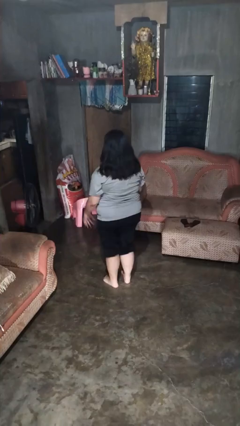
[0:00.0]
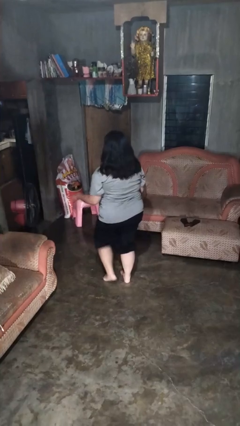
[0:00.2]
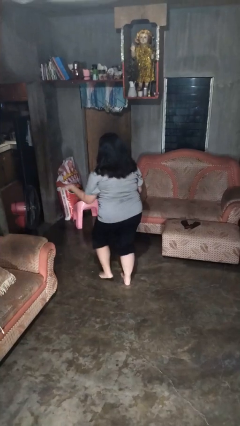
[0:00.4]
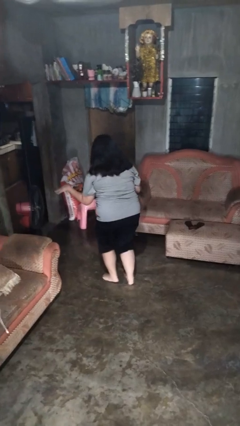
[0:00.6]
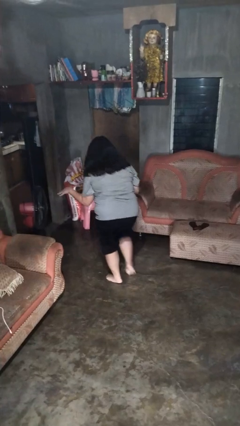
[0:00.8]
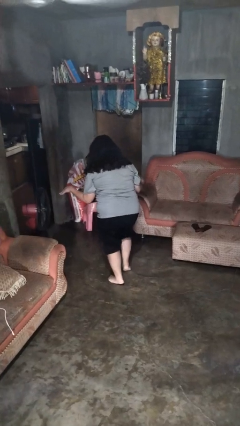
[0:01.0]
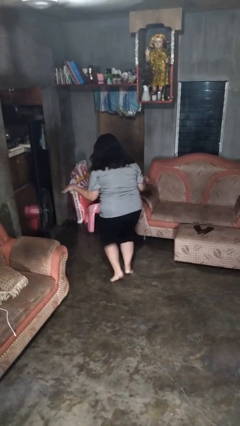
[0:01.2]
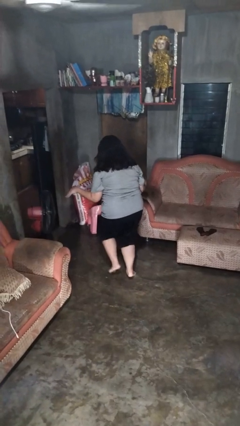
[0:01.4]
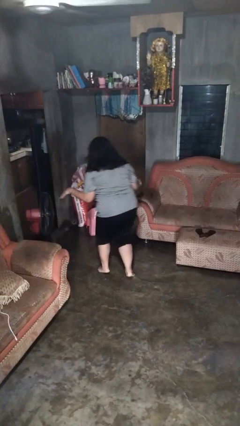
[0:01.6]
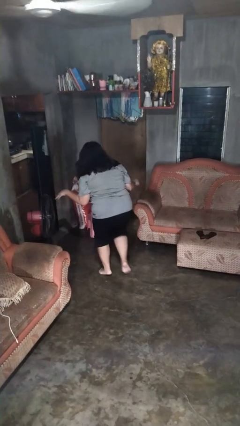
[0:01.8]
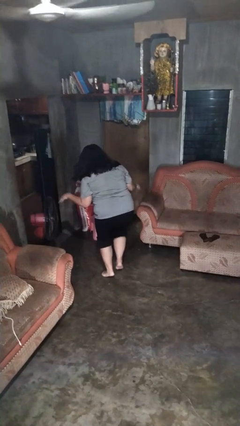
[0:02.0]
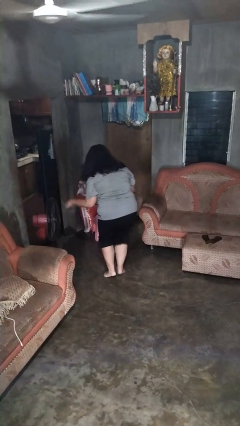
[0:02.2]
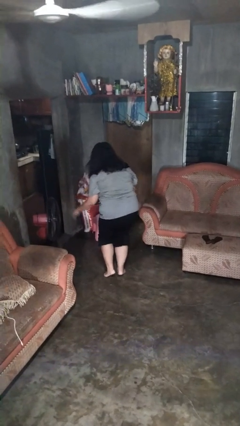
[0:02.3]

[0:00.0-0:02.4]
person walks tiptoe

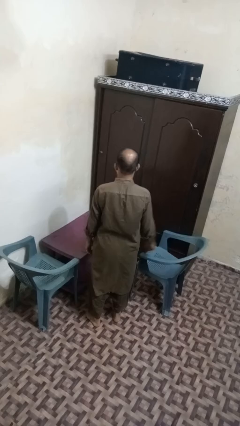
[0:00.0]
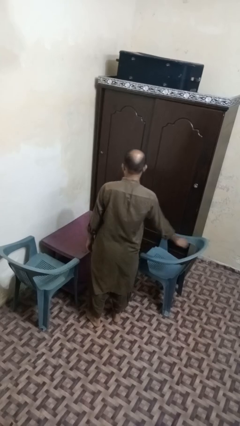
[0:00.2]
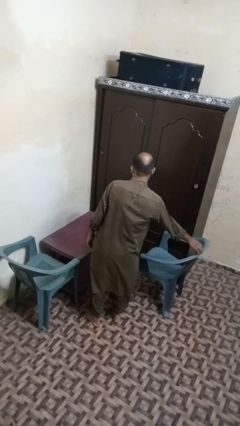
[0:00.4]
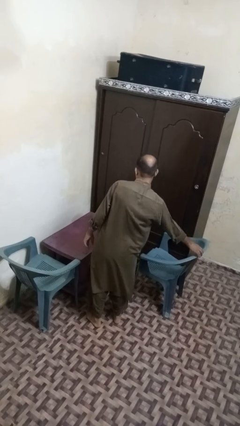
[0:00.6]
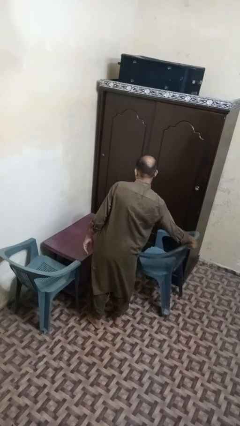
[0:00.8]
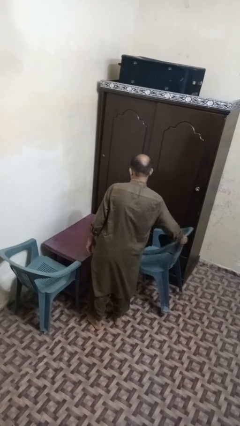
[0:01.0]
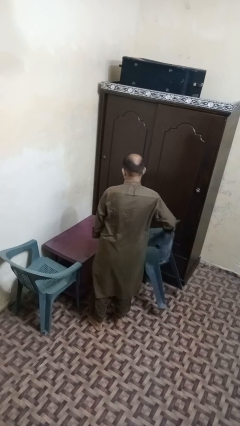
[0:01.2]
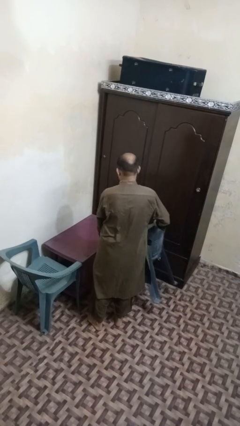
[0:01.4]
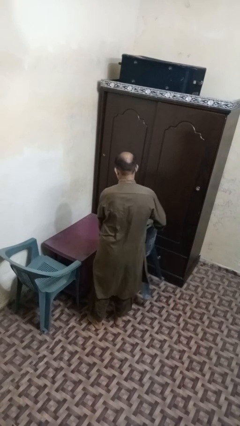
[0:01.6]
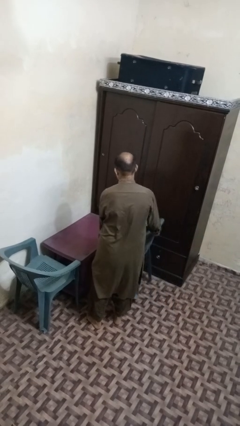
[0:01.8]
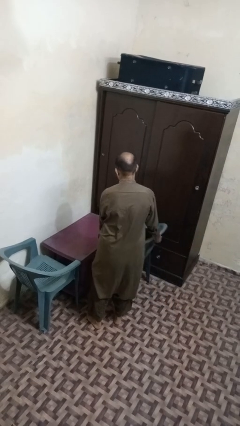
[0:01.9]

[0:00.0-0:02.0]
person pushes in chair

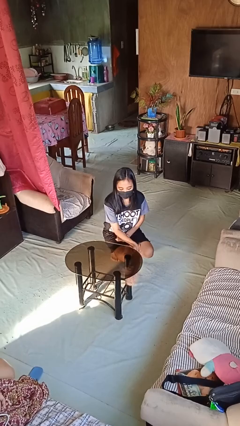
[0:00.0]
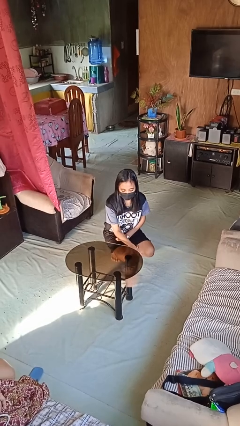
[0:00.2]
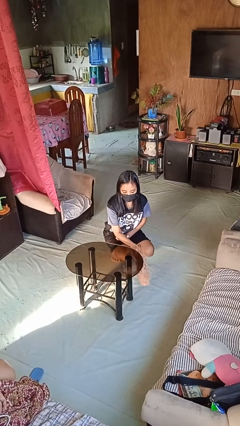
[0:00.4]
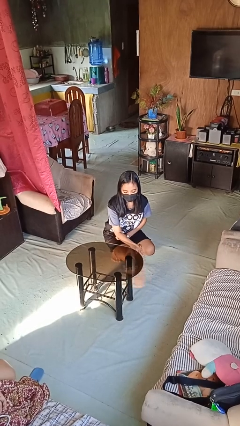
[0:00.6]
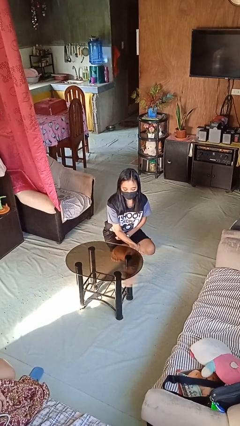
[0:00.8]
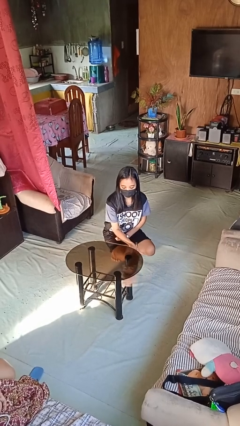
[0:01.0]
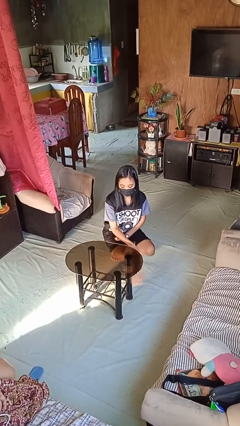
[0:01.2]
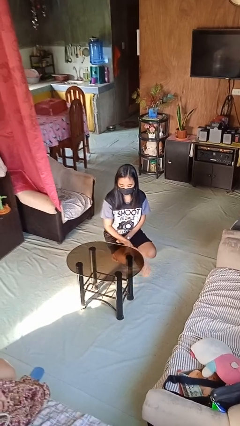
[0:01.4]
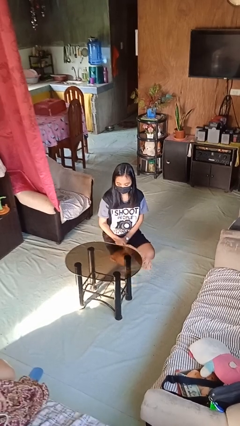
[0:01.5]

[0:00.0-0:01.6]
person dusts furniture

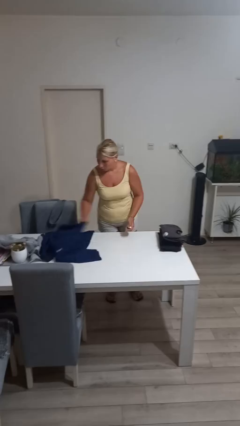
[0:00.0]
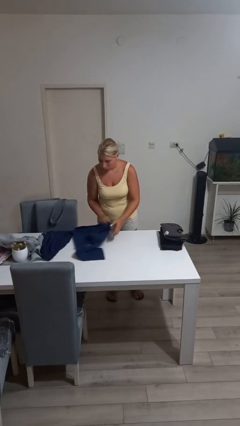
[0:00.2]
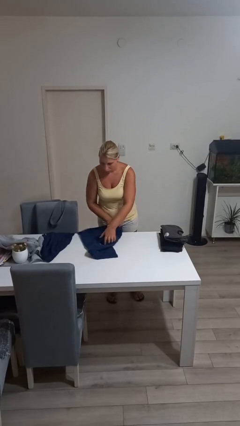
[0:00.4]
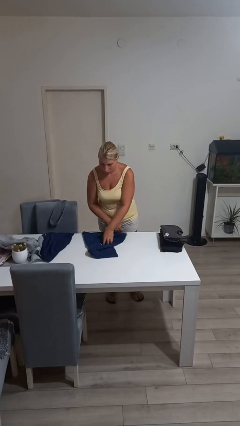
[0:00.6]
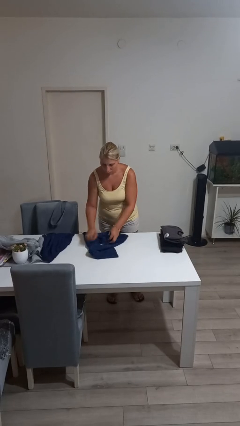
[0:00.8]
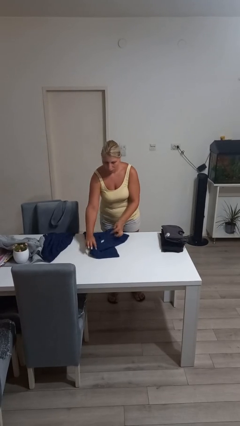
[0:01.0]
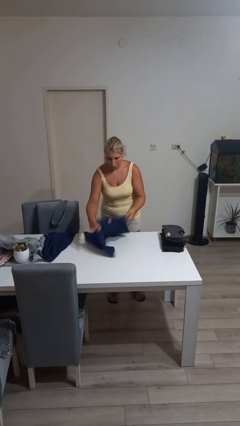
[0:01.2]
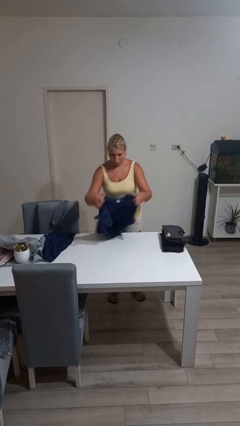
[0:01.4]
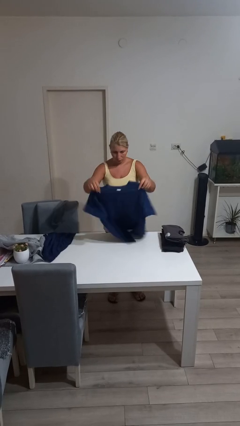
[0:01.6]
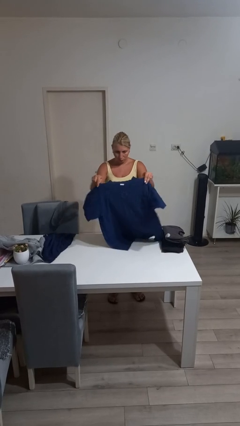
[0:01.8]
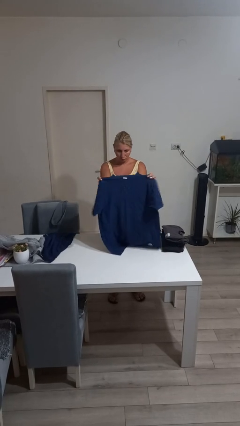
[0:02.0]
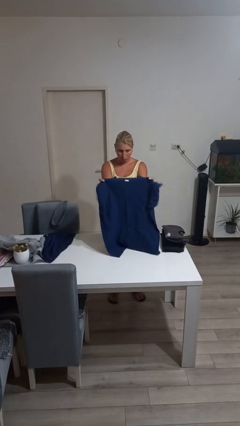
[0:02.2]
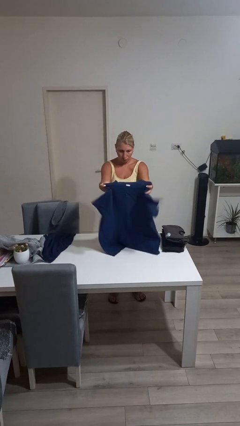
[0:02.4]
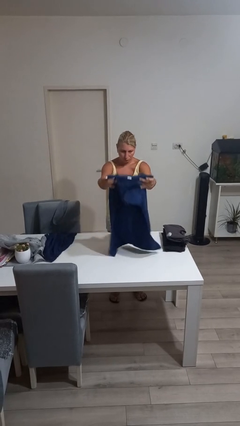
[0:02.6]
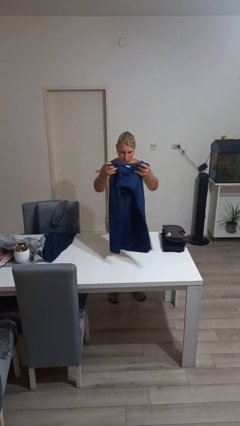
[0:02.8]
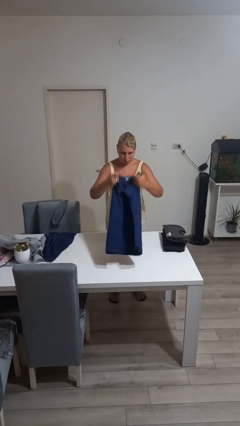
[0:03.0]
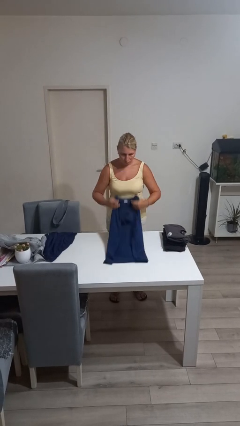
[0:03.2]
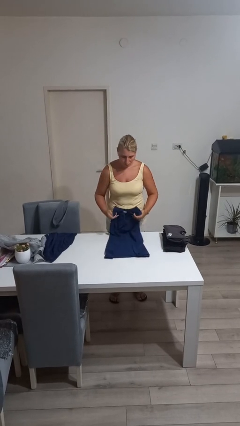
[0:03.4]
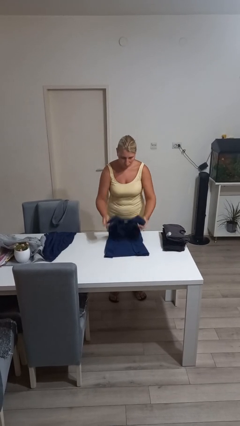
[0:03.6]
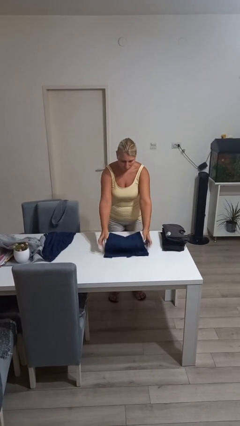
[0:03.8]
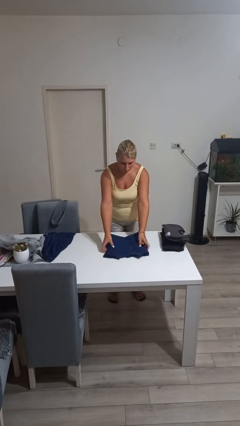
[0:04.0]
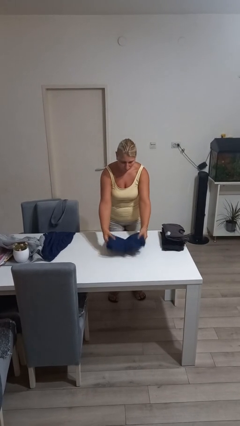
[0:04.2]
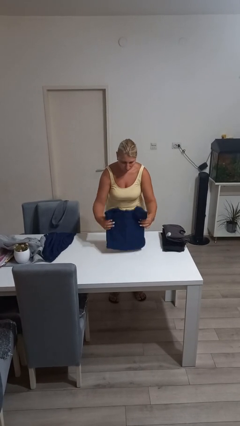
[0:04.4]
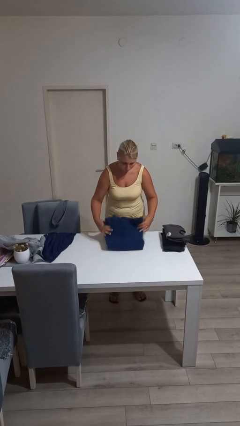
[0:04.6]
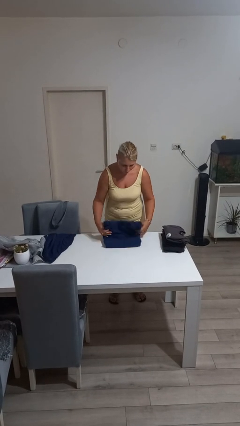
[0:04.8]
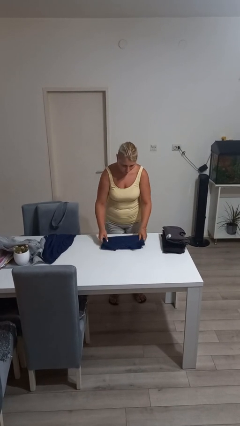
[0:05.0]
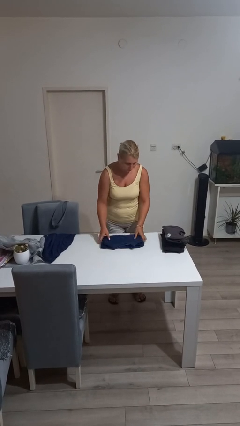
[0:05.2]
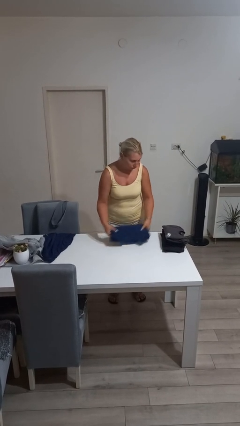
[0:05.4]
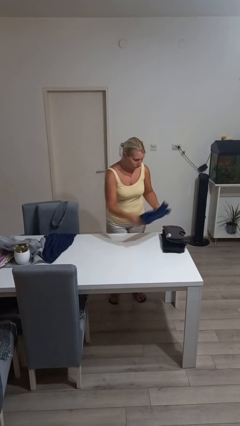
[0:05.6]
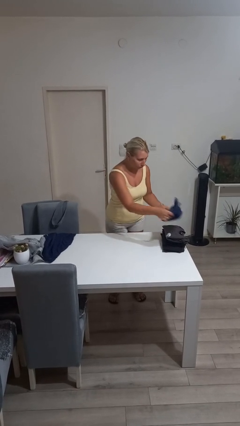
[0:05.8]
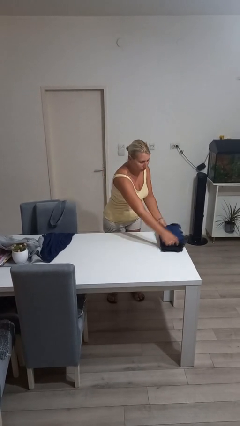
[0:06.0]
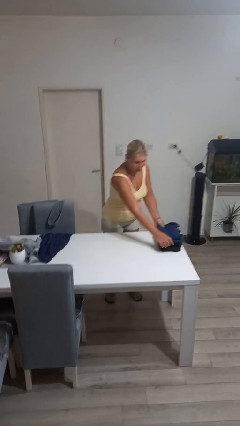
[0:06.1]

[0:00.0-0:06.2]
person folds shirt

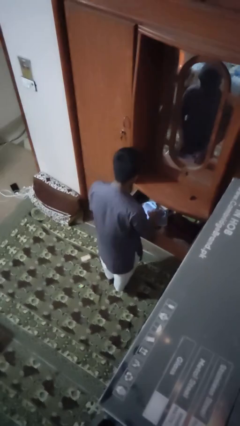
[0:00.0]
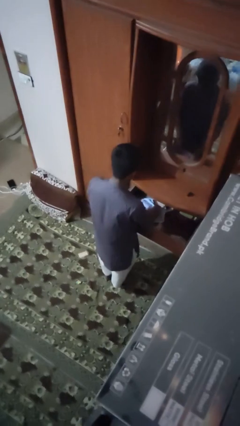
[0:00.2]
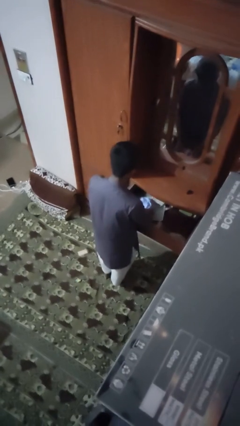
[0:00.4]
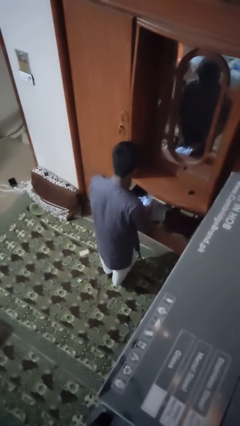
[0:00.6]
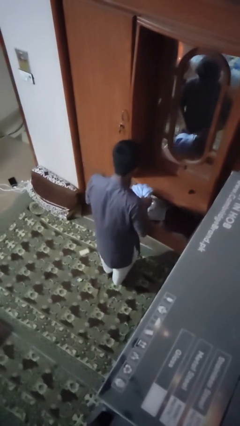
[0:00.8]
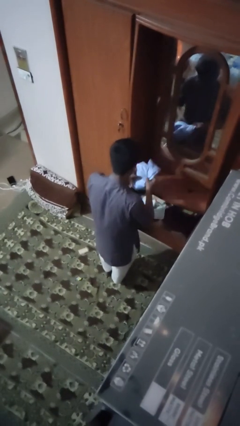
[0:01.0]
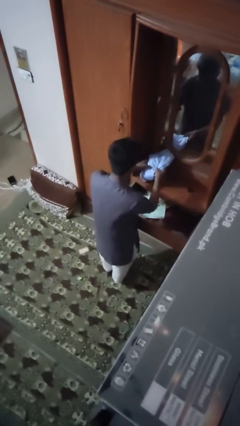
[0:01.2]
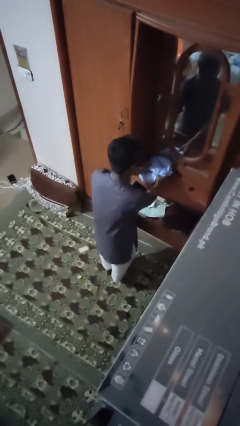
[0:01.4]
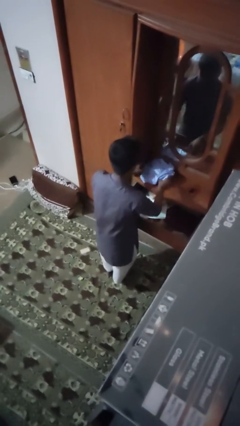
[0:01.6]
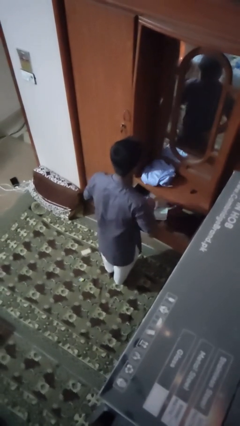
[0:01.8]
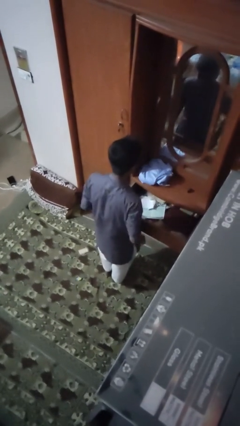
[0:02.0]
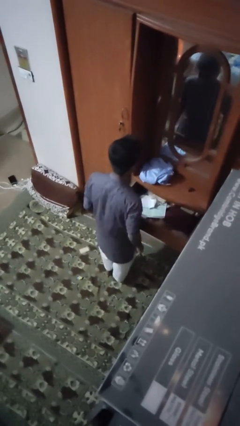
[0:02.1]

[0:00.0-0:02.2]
person takes clothes from dresser

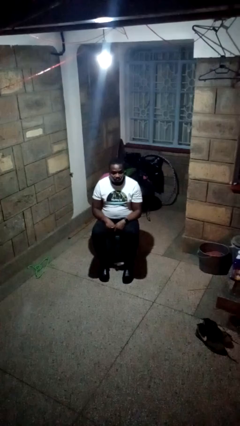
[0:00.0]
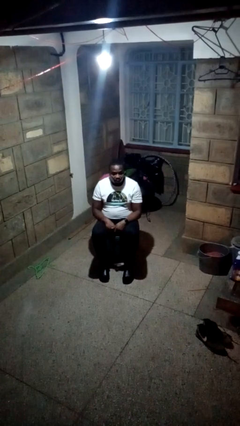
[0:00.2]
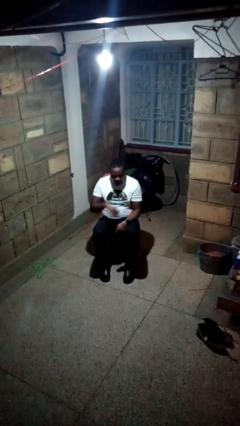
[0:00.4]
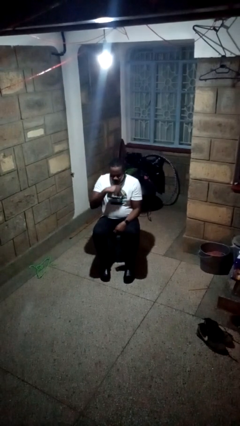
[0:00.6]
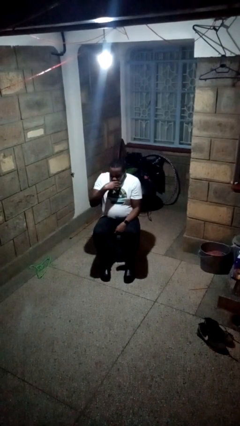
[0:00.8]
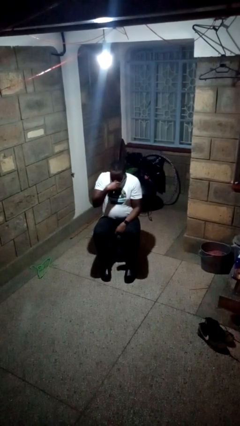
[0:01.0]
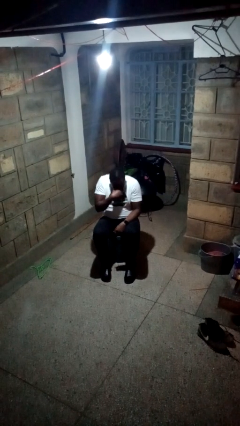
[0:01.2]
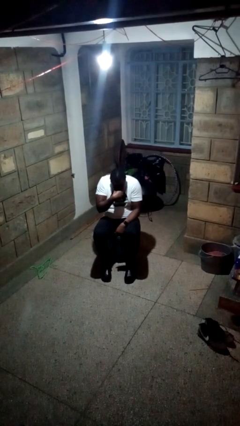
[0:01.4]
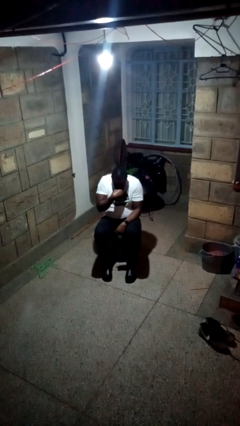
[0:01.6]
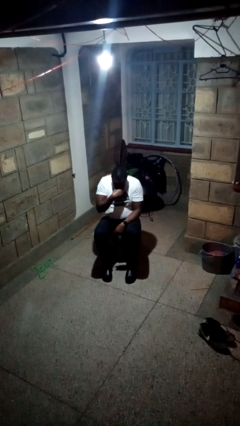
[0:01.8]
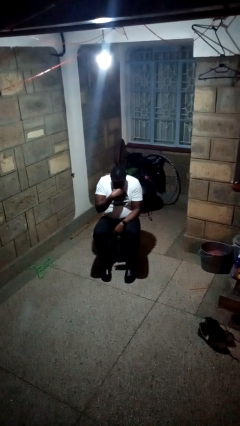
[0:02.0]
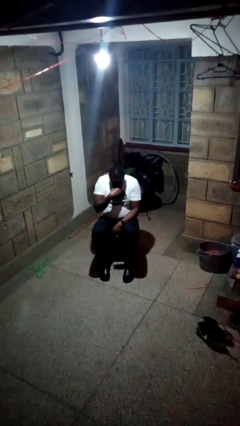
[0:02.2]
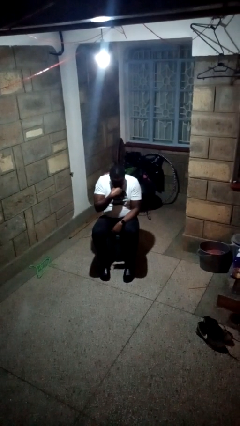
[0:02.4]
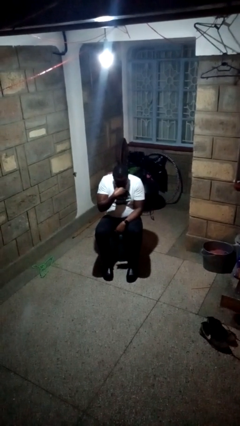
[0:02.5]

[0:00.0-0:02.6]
person sneezes into hand

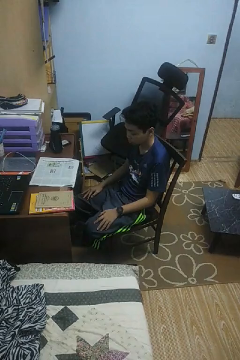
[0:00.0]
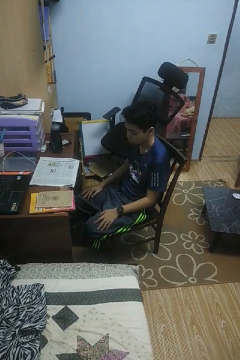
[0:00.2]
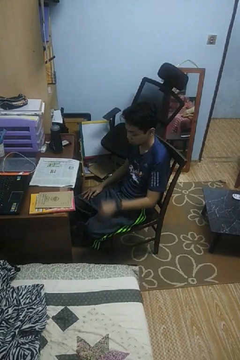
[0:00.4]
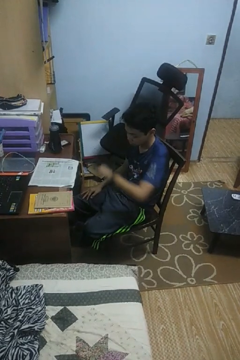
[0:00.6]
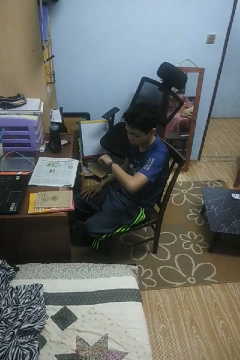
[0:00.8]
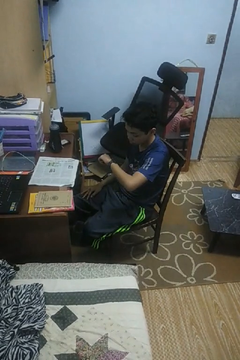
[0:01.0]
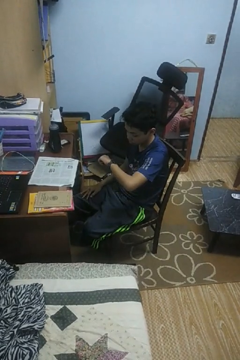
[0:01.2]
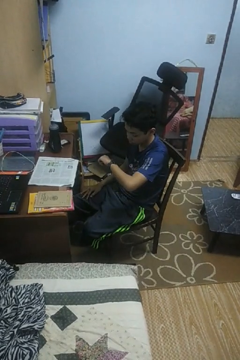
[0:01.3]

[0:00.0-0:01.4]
person looks at wristwatch
